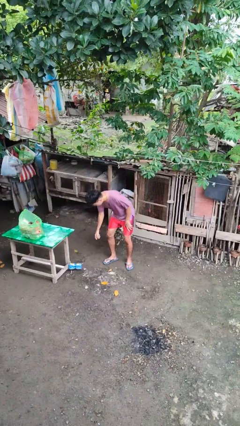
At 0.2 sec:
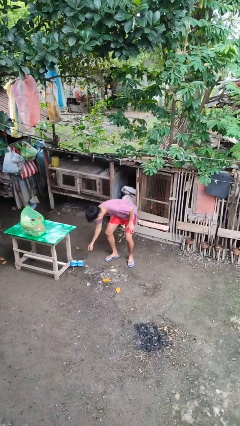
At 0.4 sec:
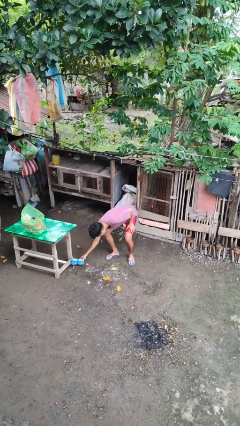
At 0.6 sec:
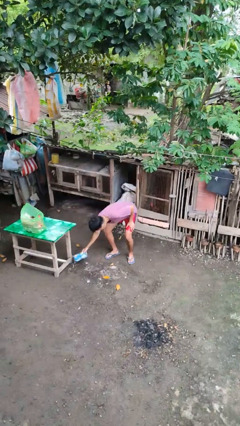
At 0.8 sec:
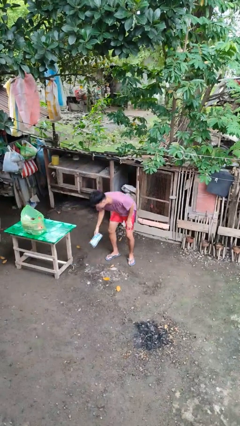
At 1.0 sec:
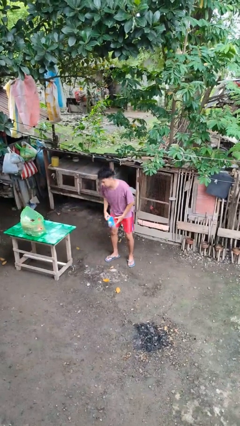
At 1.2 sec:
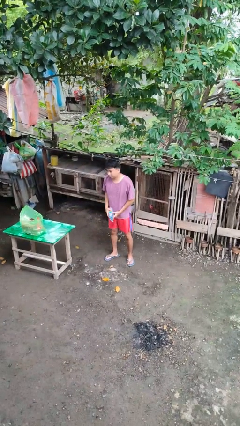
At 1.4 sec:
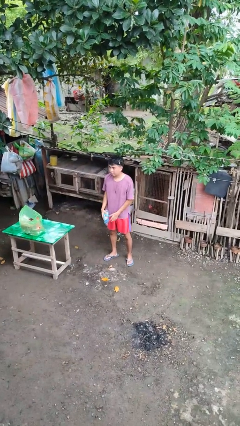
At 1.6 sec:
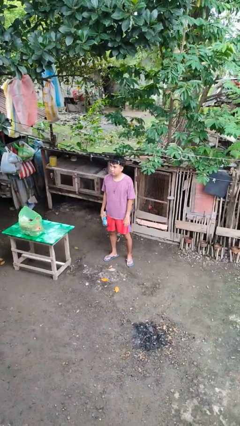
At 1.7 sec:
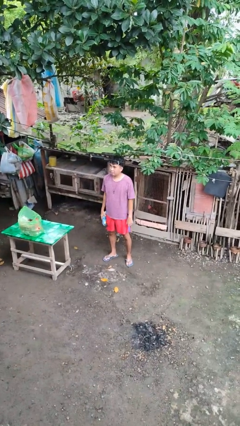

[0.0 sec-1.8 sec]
person picks up object from floor

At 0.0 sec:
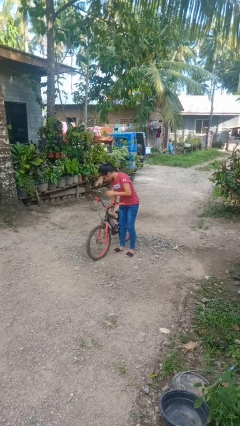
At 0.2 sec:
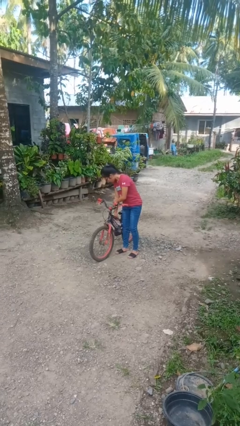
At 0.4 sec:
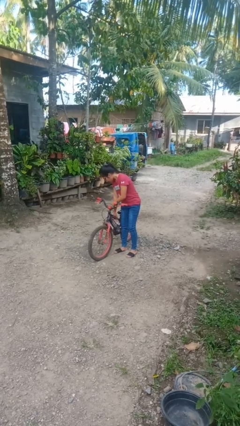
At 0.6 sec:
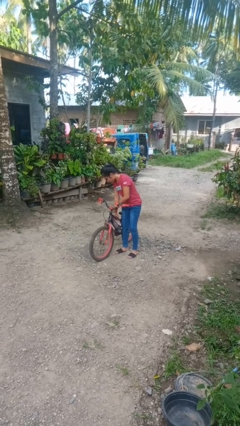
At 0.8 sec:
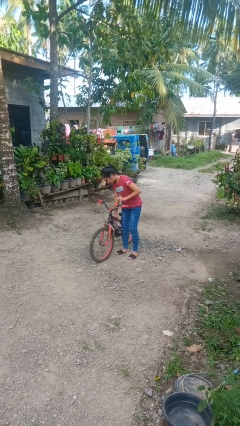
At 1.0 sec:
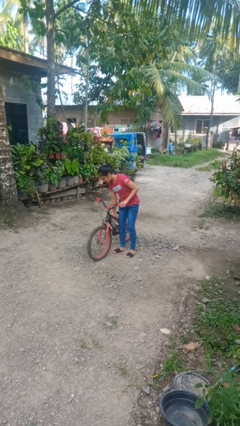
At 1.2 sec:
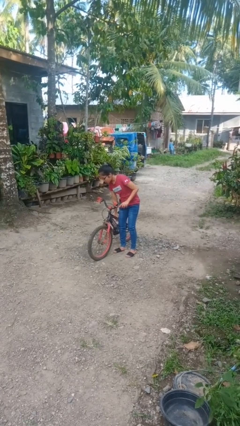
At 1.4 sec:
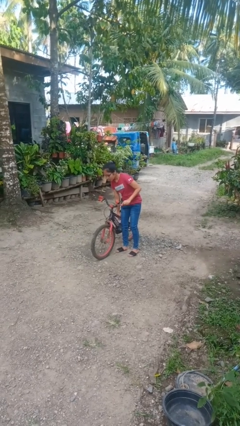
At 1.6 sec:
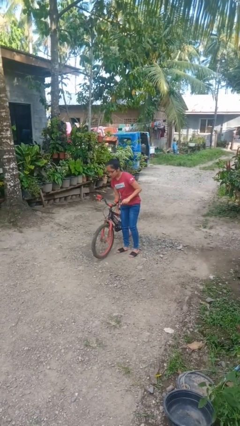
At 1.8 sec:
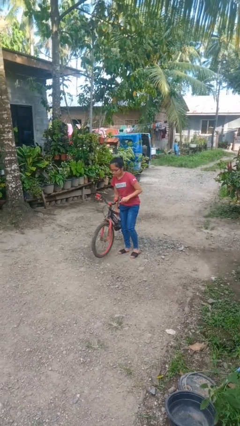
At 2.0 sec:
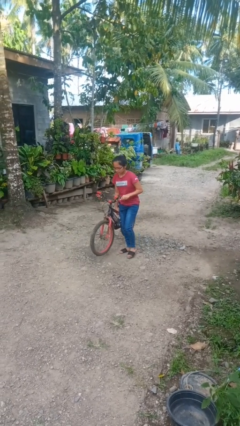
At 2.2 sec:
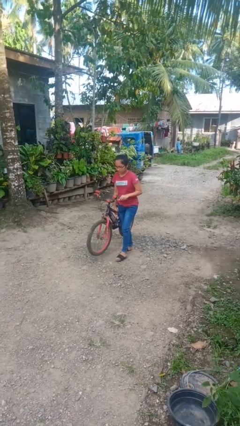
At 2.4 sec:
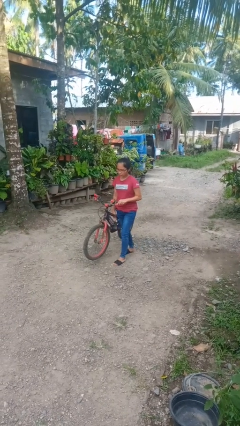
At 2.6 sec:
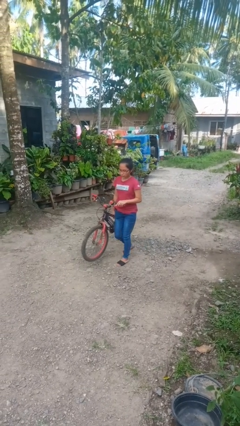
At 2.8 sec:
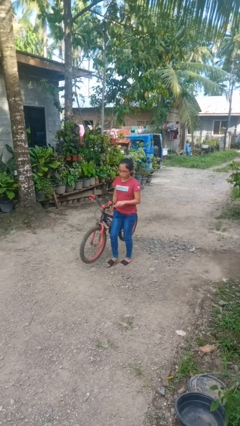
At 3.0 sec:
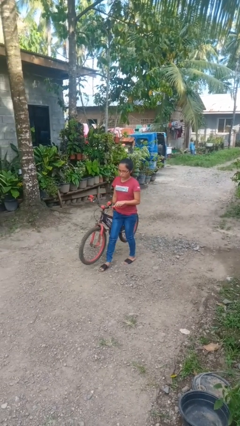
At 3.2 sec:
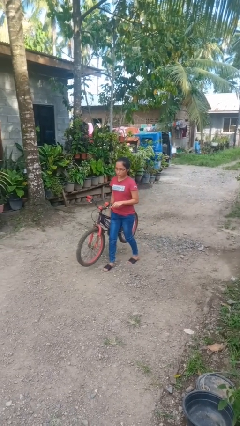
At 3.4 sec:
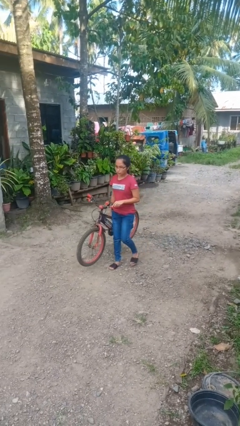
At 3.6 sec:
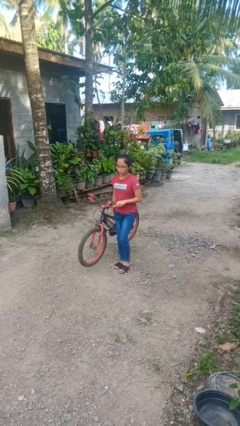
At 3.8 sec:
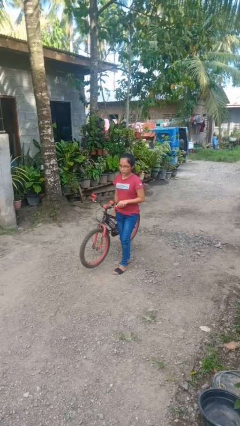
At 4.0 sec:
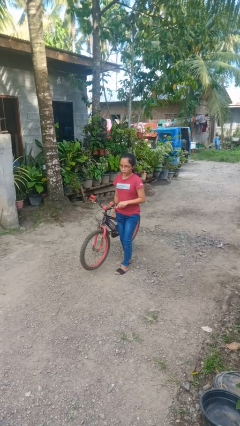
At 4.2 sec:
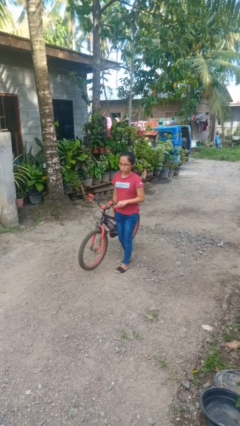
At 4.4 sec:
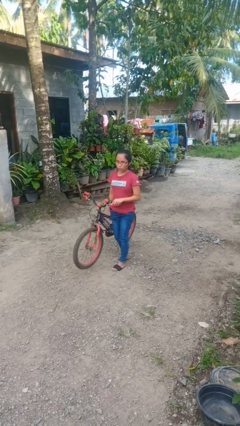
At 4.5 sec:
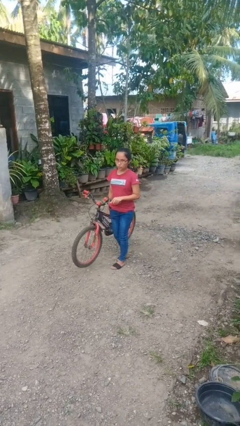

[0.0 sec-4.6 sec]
person carries bicycle

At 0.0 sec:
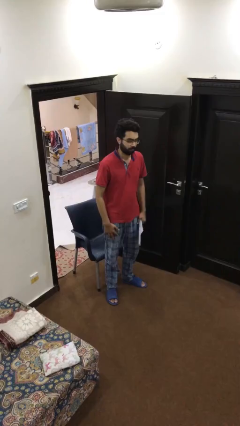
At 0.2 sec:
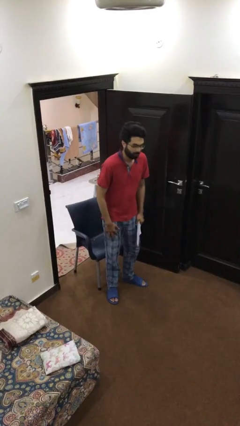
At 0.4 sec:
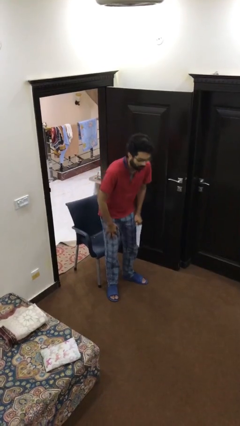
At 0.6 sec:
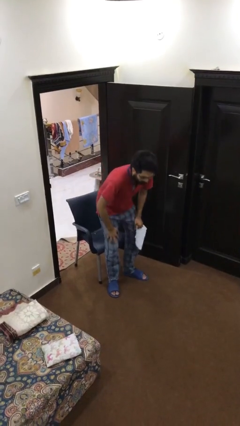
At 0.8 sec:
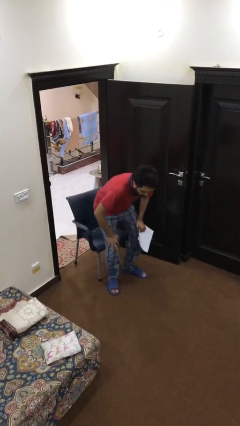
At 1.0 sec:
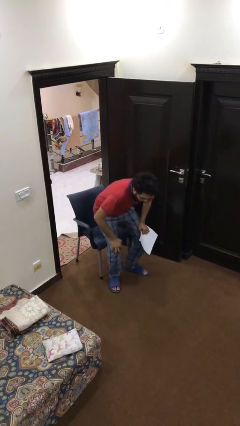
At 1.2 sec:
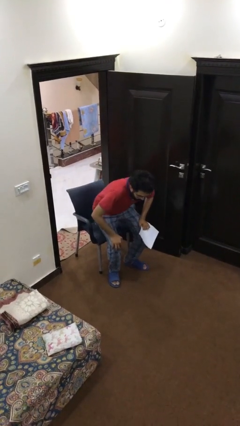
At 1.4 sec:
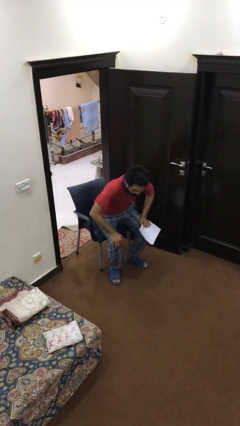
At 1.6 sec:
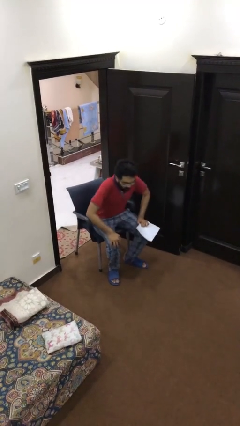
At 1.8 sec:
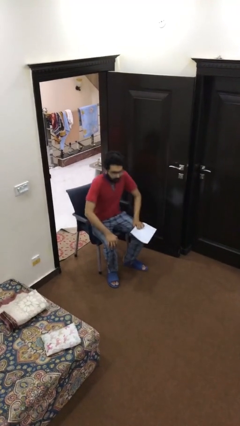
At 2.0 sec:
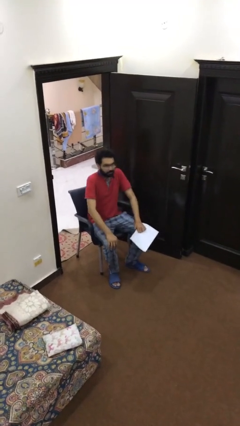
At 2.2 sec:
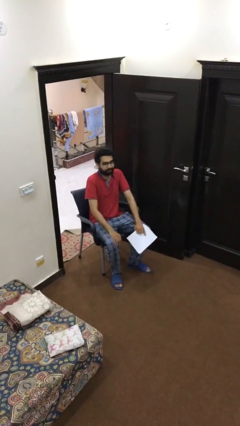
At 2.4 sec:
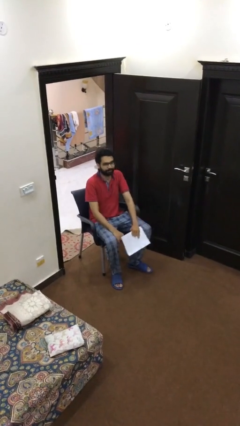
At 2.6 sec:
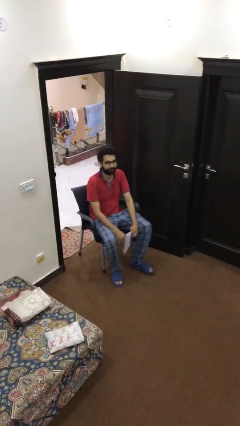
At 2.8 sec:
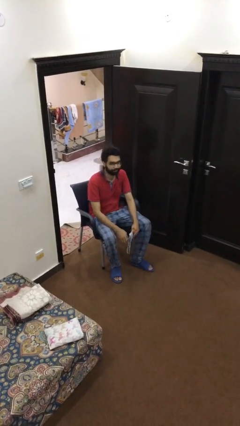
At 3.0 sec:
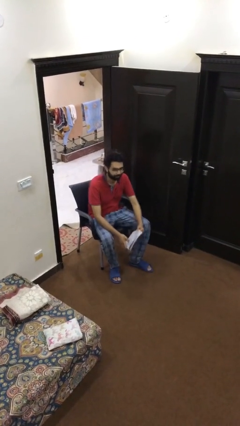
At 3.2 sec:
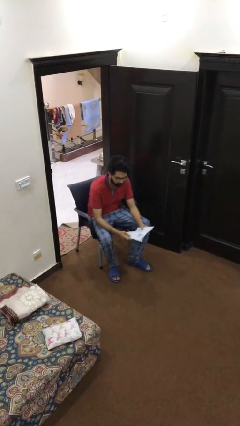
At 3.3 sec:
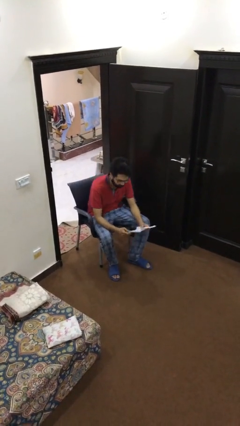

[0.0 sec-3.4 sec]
person sits down
